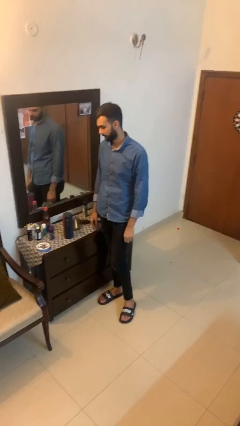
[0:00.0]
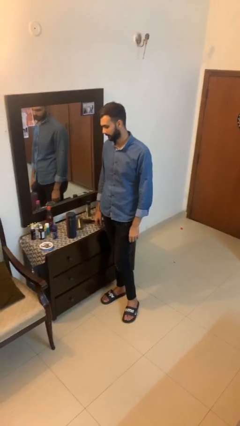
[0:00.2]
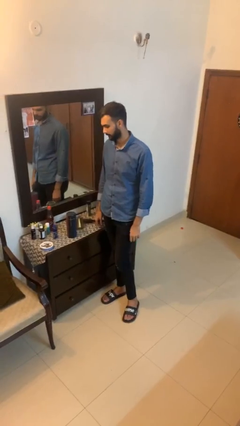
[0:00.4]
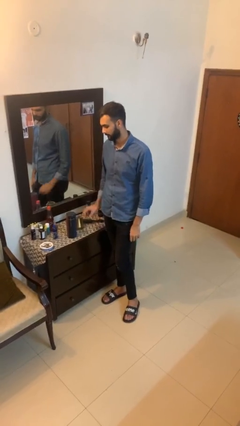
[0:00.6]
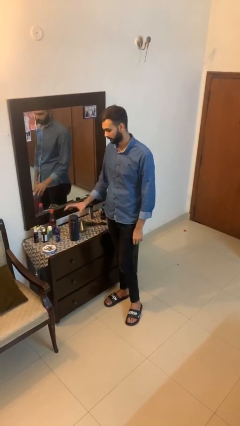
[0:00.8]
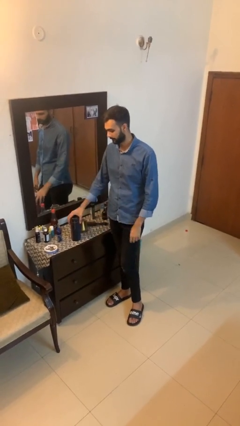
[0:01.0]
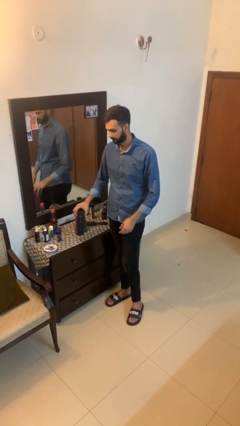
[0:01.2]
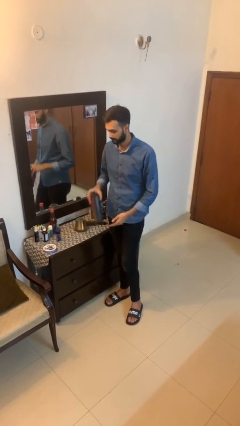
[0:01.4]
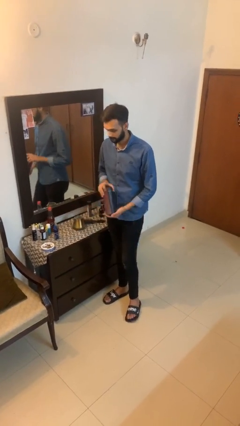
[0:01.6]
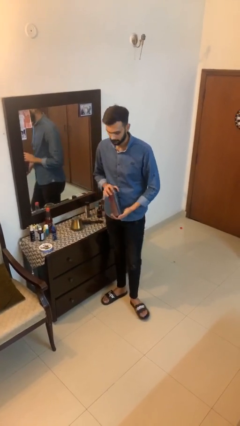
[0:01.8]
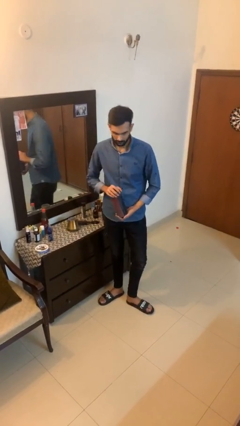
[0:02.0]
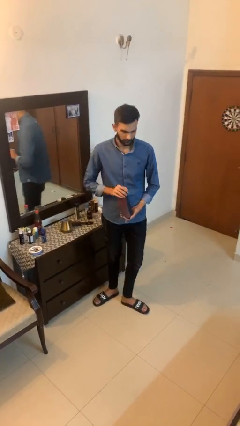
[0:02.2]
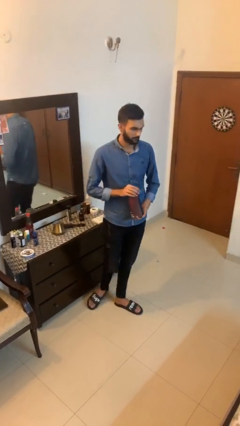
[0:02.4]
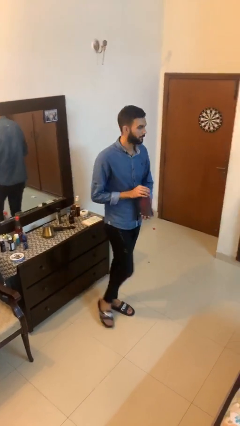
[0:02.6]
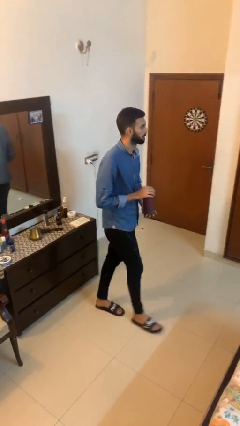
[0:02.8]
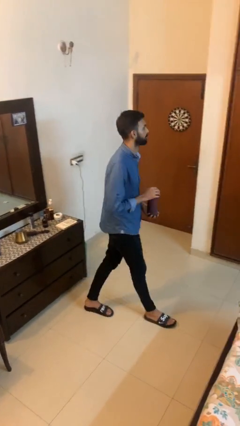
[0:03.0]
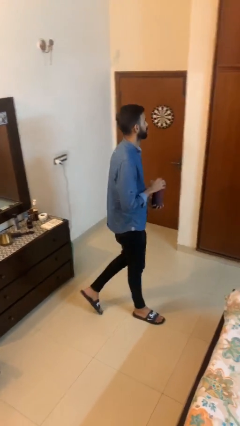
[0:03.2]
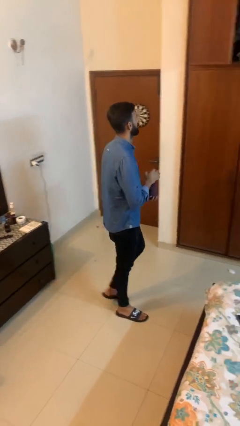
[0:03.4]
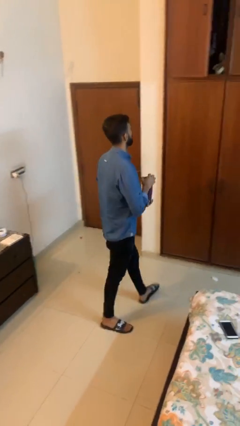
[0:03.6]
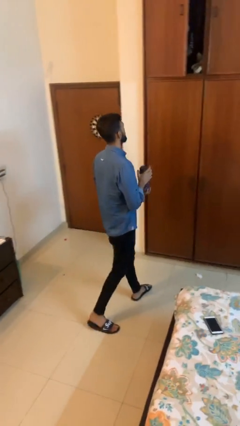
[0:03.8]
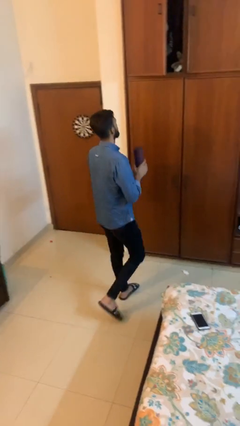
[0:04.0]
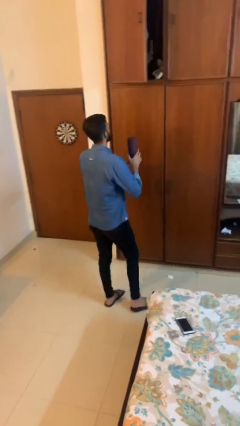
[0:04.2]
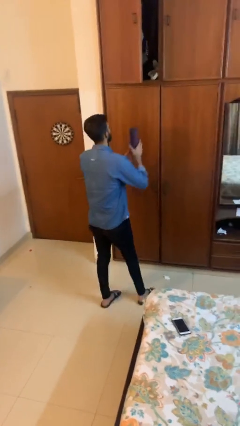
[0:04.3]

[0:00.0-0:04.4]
person picks up object from table

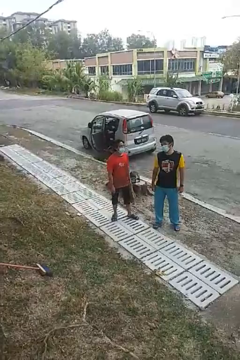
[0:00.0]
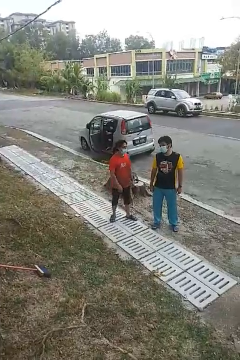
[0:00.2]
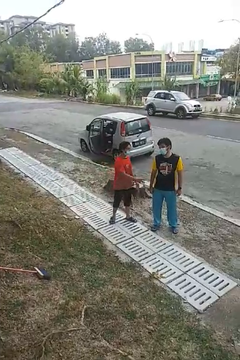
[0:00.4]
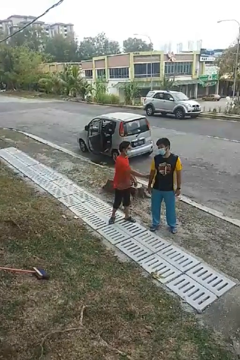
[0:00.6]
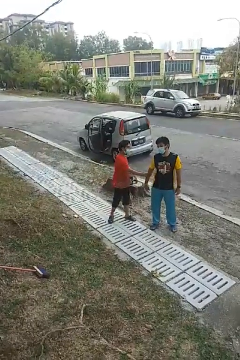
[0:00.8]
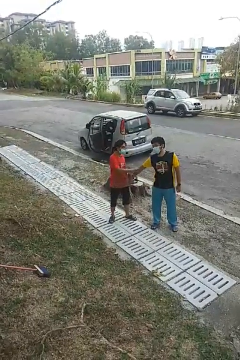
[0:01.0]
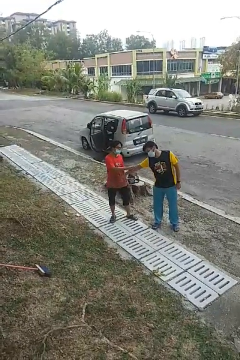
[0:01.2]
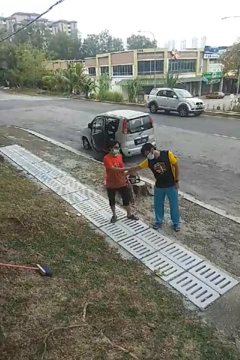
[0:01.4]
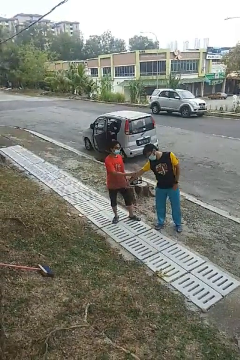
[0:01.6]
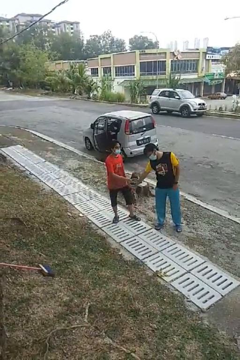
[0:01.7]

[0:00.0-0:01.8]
person grabs person by forearm

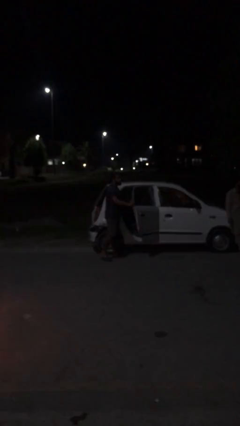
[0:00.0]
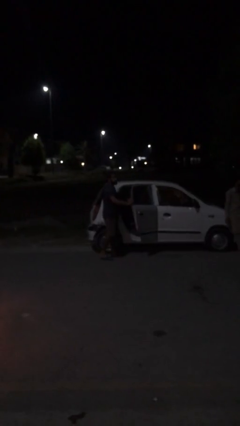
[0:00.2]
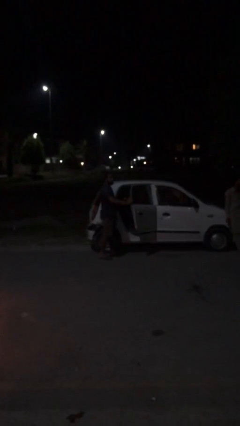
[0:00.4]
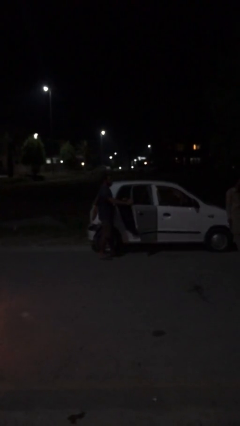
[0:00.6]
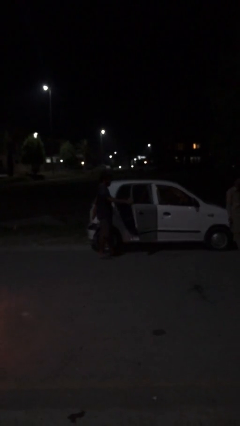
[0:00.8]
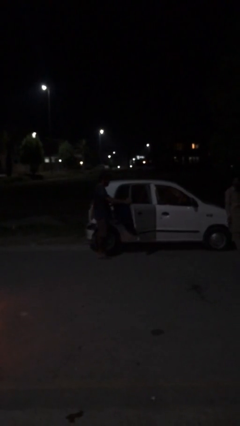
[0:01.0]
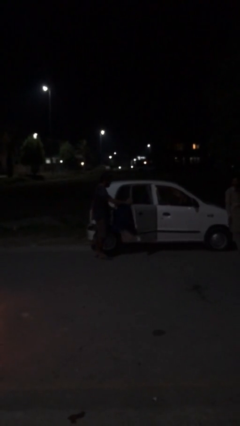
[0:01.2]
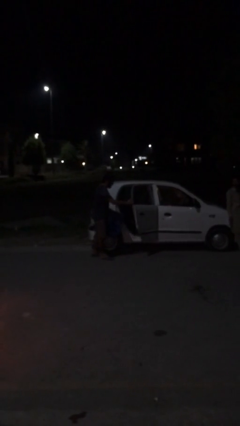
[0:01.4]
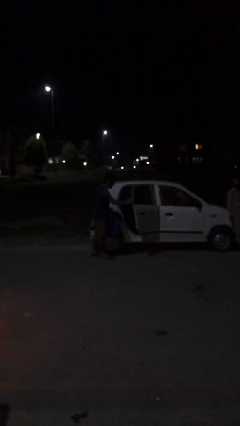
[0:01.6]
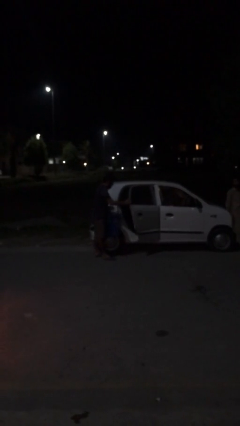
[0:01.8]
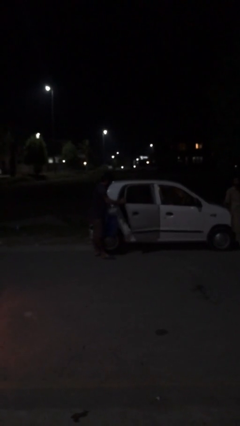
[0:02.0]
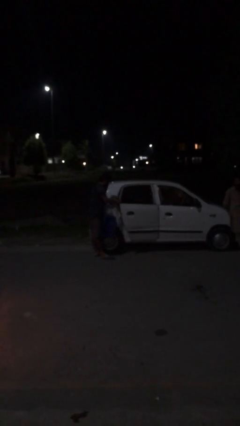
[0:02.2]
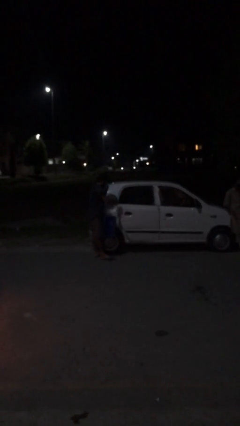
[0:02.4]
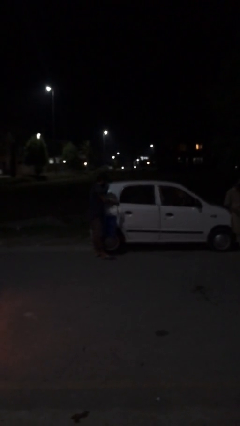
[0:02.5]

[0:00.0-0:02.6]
person unloads car

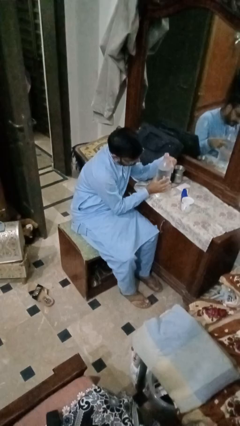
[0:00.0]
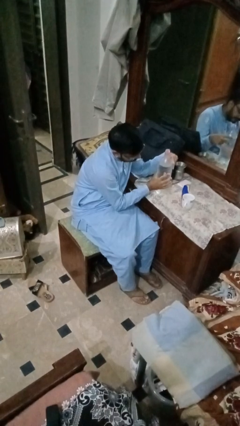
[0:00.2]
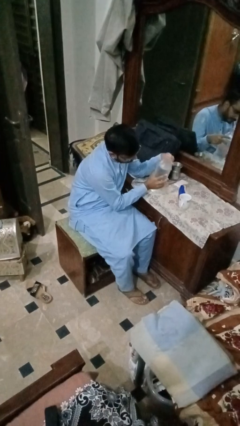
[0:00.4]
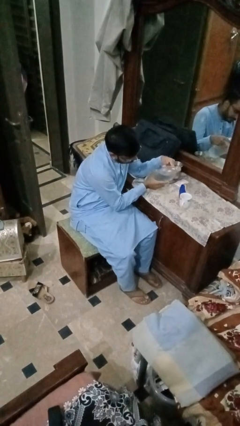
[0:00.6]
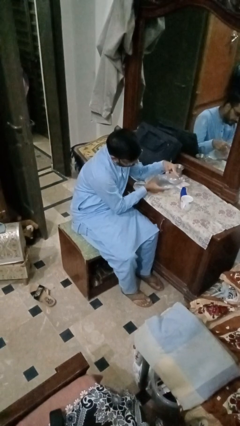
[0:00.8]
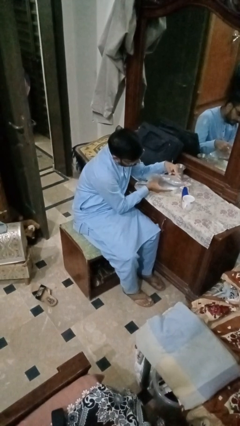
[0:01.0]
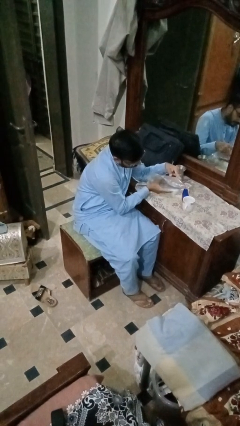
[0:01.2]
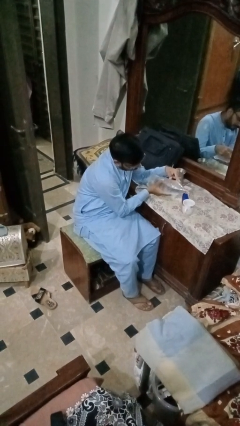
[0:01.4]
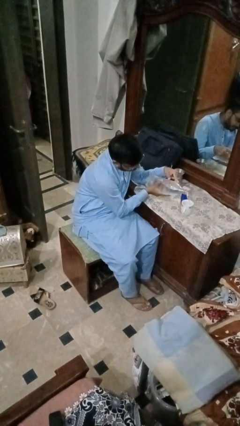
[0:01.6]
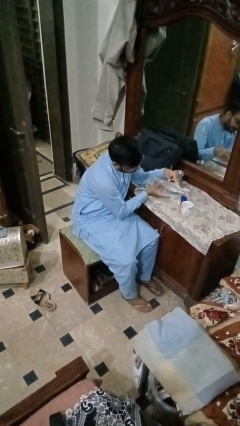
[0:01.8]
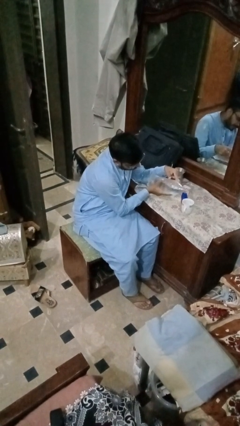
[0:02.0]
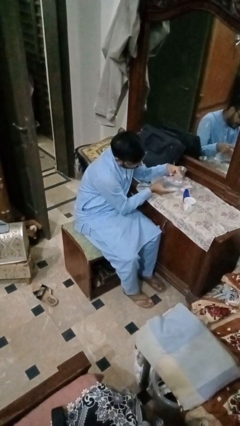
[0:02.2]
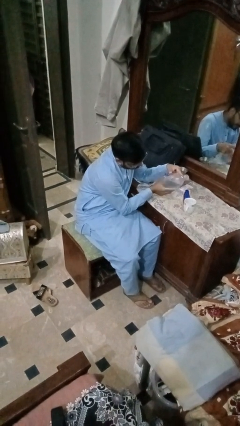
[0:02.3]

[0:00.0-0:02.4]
person pours liquid into cup

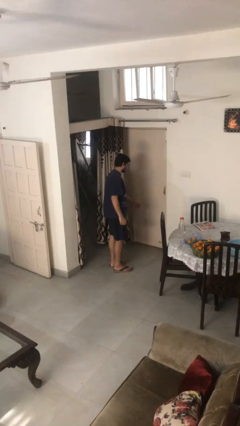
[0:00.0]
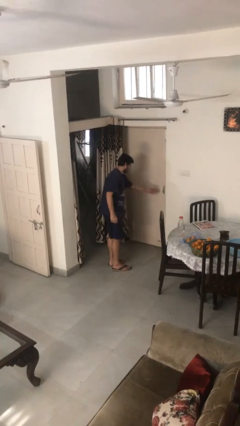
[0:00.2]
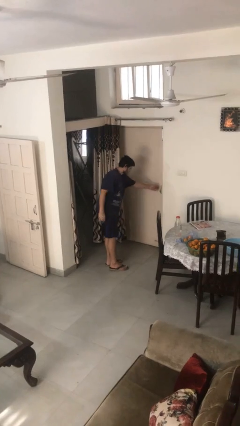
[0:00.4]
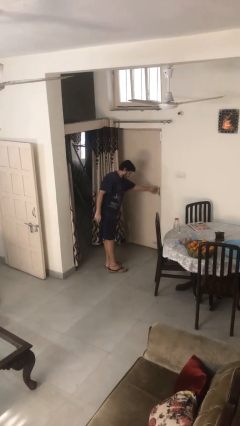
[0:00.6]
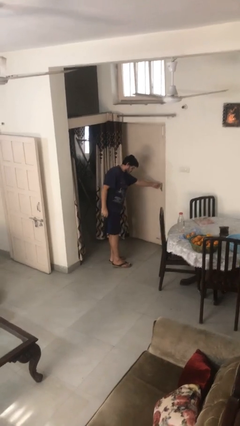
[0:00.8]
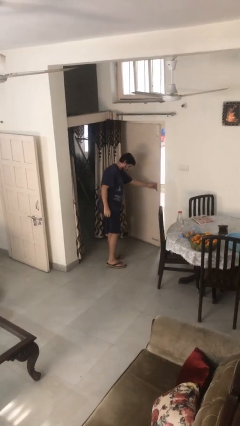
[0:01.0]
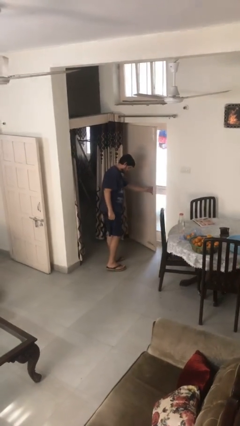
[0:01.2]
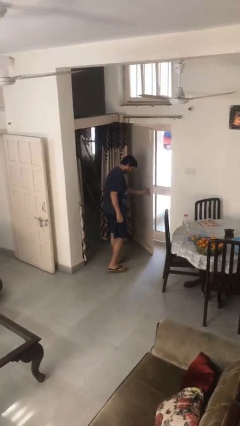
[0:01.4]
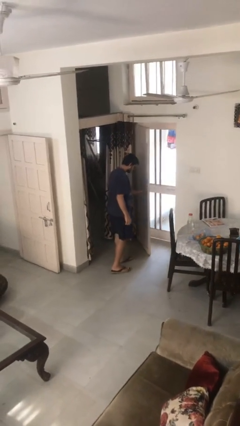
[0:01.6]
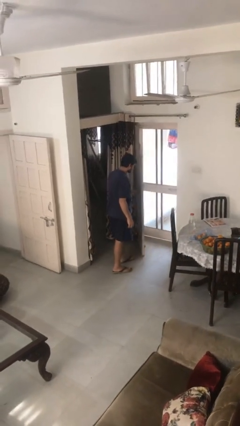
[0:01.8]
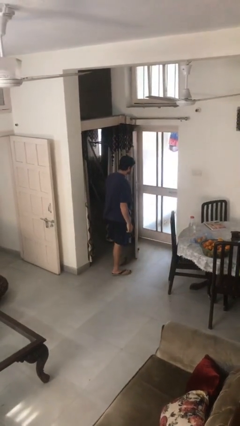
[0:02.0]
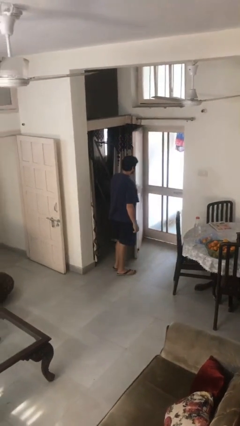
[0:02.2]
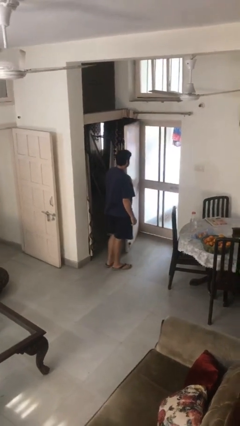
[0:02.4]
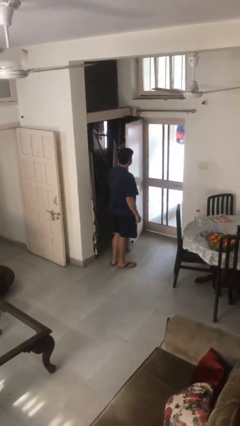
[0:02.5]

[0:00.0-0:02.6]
person opens facility door

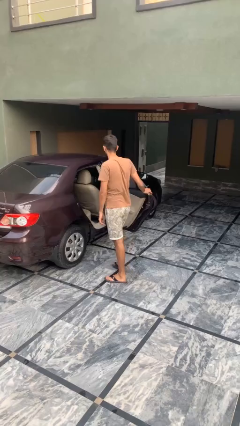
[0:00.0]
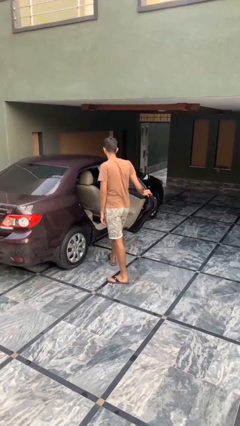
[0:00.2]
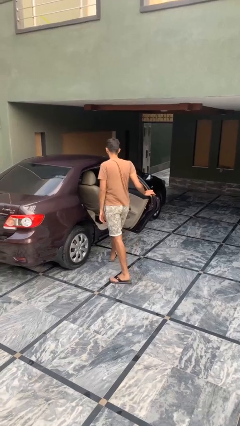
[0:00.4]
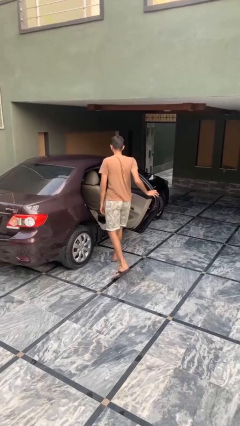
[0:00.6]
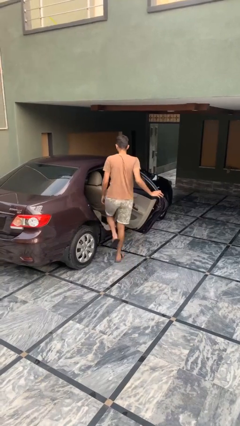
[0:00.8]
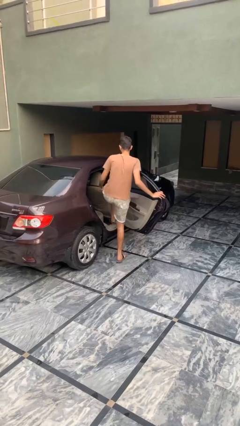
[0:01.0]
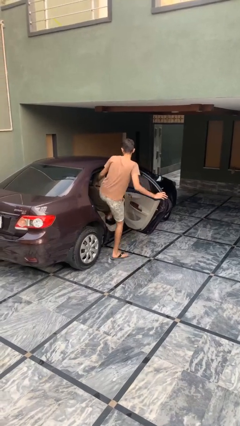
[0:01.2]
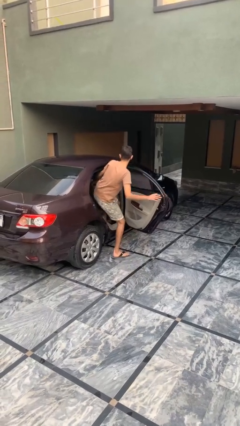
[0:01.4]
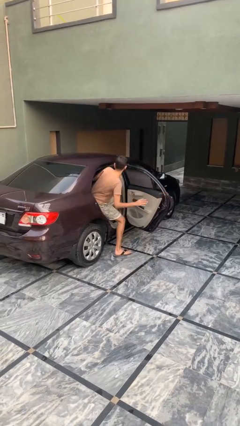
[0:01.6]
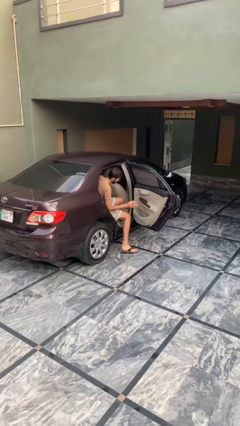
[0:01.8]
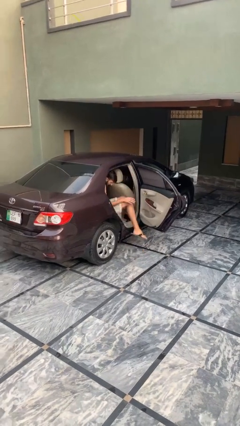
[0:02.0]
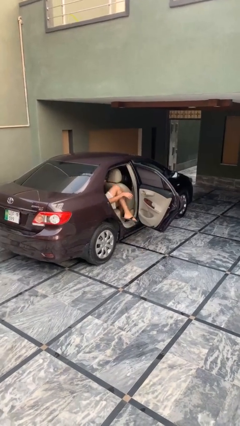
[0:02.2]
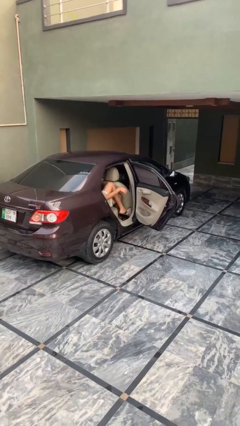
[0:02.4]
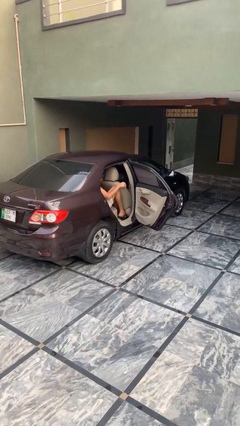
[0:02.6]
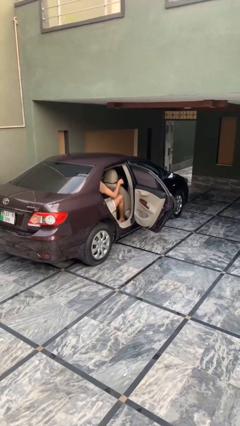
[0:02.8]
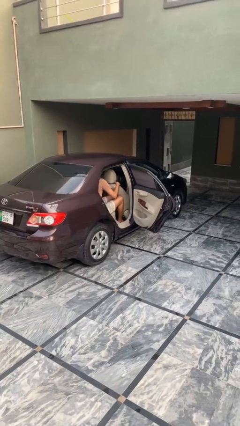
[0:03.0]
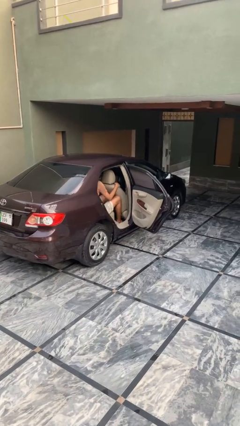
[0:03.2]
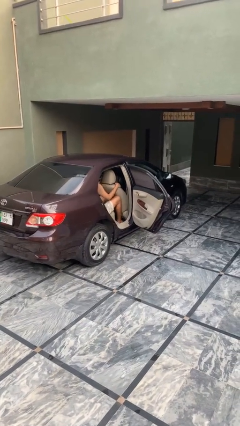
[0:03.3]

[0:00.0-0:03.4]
person enters car

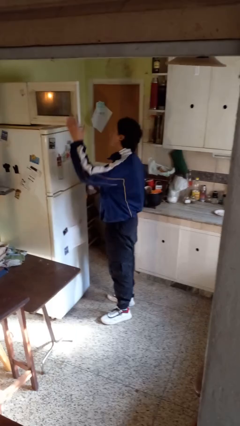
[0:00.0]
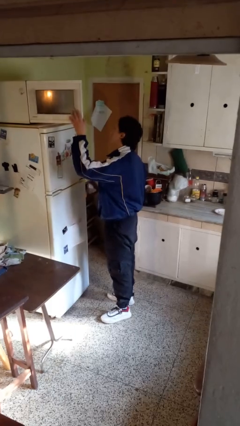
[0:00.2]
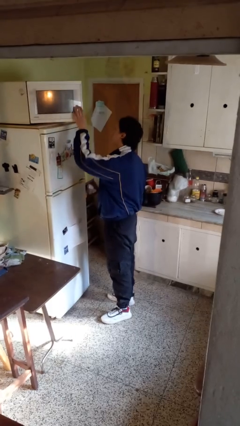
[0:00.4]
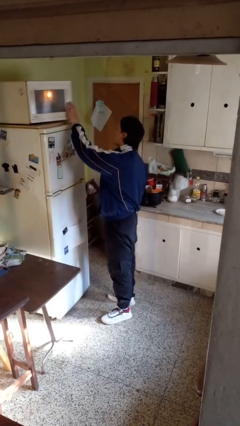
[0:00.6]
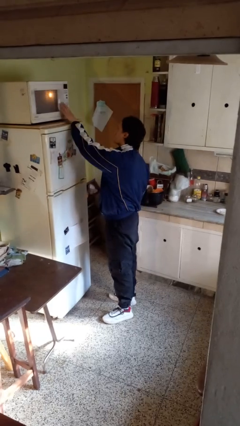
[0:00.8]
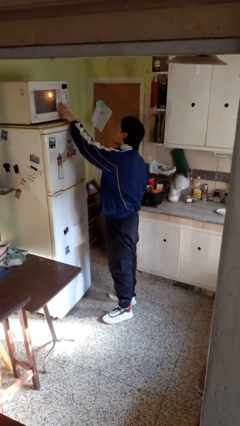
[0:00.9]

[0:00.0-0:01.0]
person closes microwave
